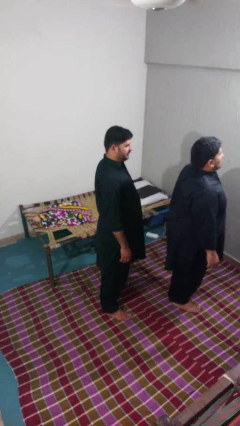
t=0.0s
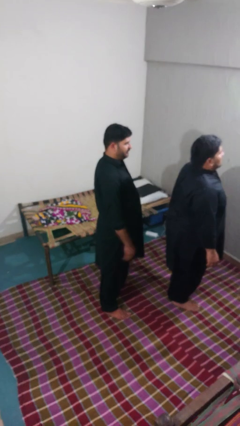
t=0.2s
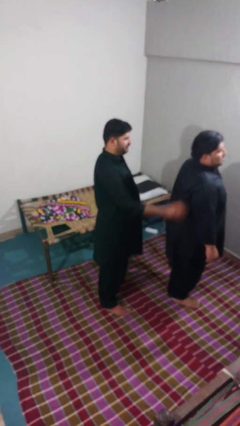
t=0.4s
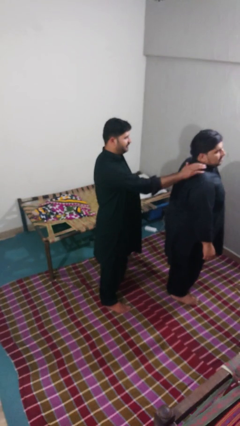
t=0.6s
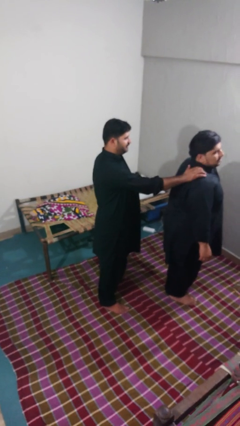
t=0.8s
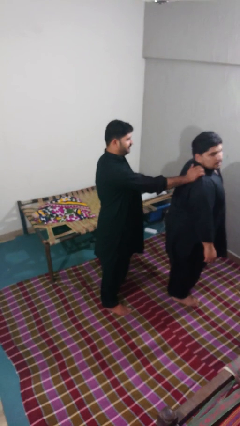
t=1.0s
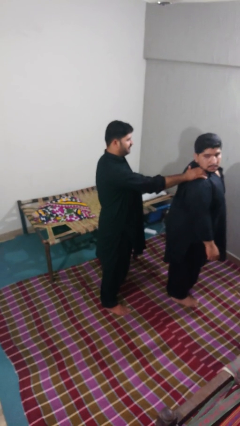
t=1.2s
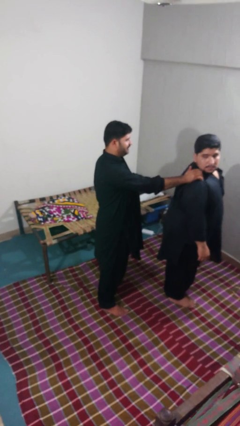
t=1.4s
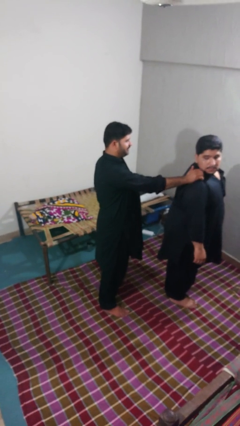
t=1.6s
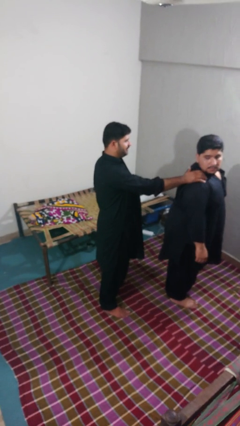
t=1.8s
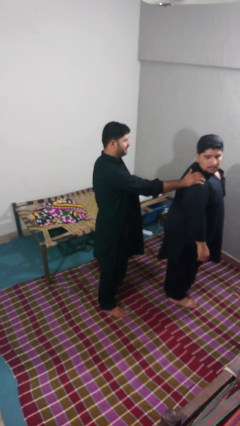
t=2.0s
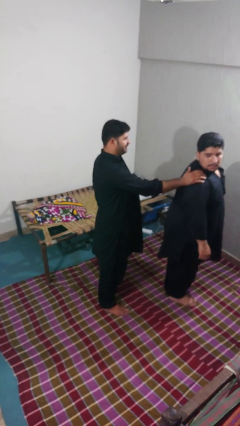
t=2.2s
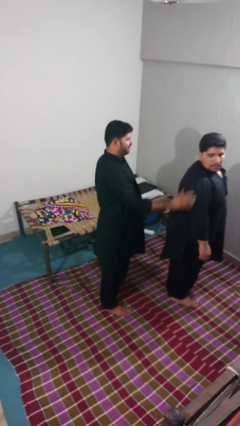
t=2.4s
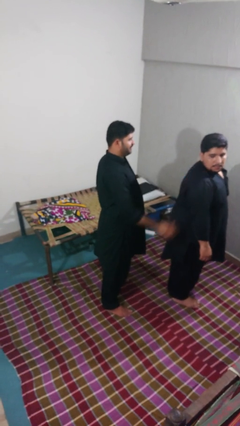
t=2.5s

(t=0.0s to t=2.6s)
person touches back of person

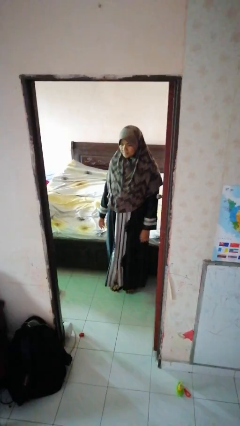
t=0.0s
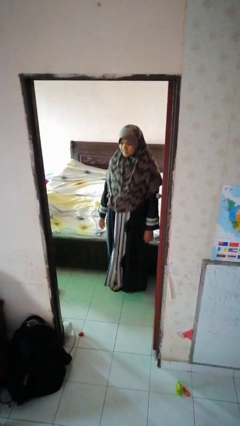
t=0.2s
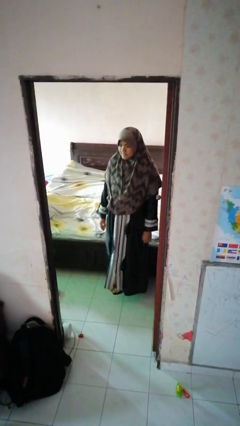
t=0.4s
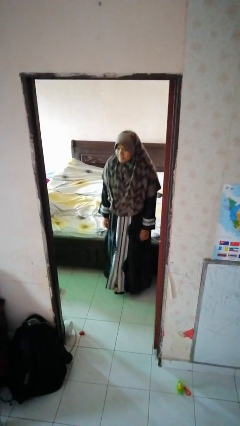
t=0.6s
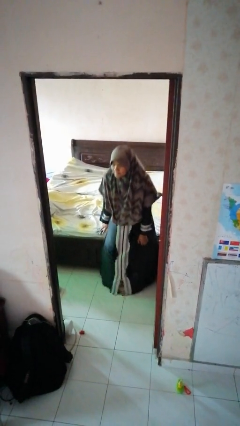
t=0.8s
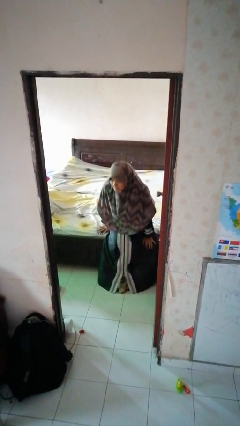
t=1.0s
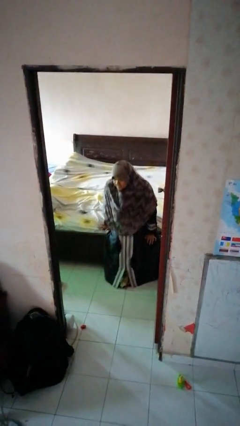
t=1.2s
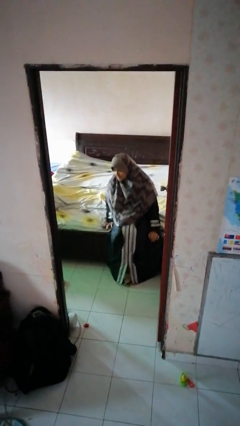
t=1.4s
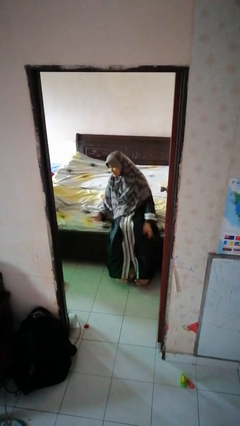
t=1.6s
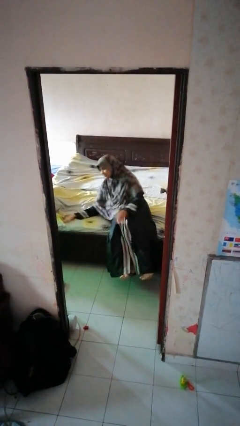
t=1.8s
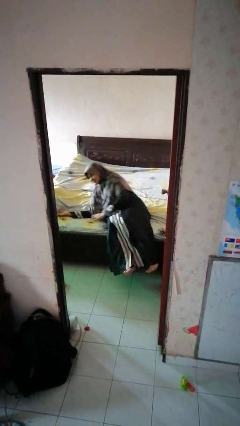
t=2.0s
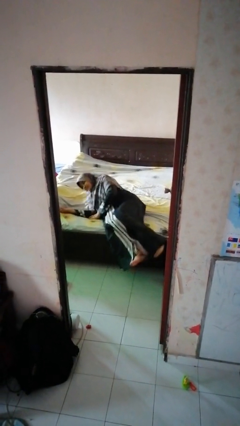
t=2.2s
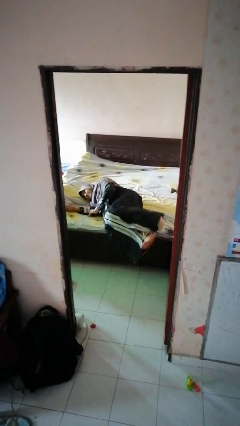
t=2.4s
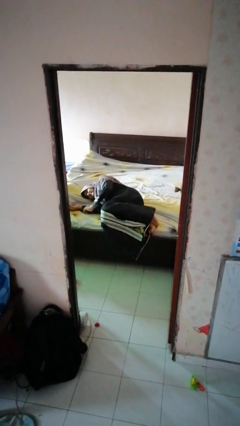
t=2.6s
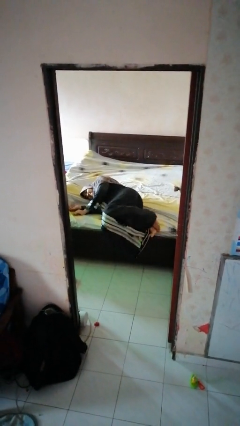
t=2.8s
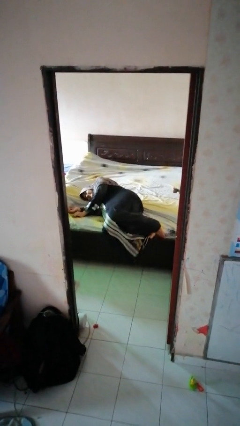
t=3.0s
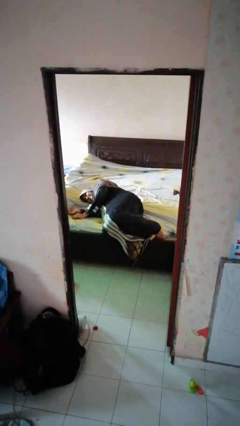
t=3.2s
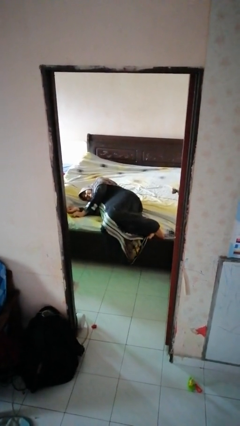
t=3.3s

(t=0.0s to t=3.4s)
person lies down on bed

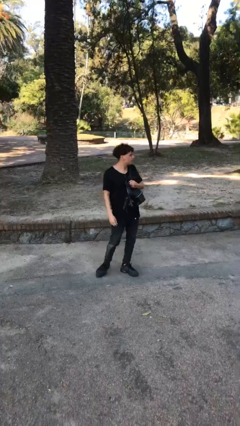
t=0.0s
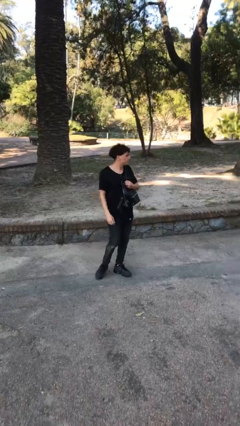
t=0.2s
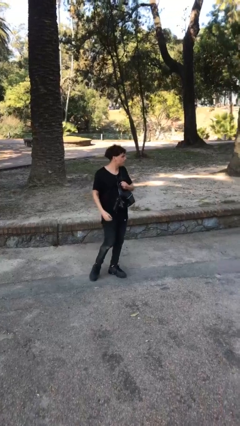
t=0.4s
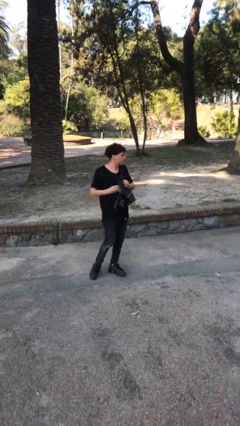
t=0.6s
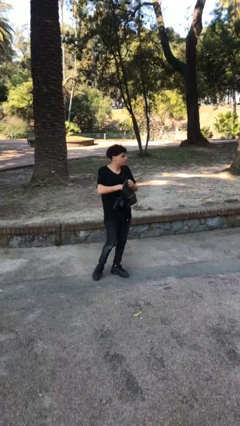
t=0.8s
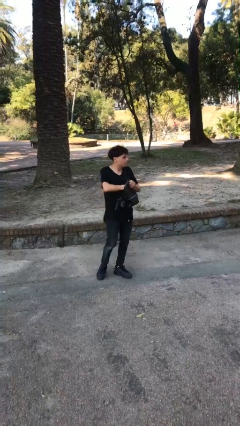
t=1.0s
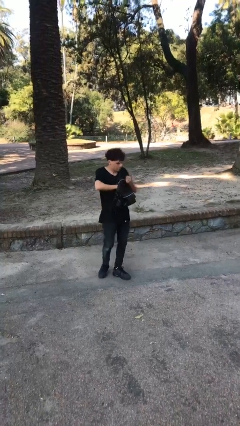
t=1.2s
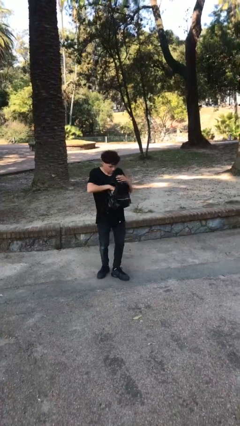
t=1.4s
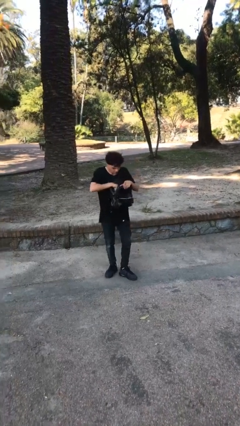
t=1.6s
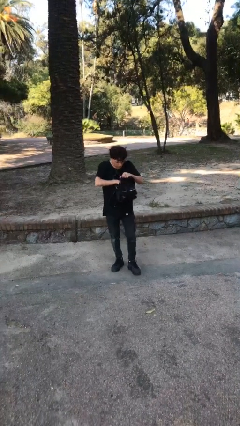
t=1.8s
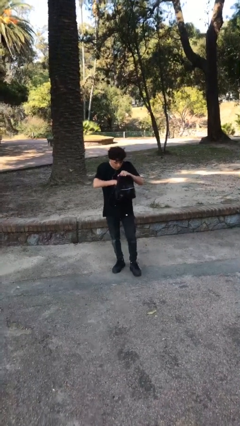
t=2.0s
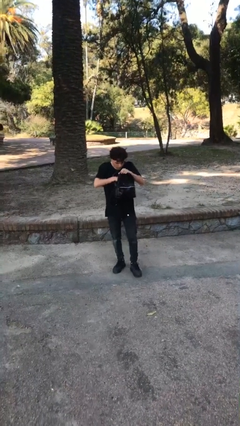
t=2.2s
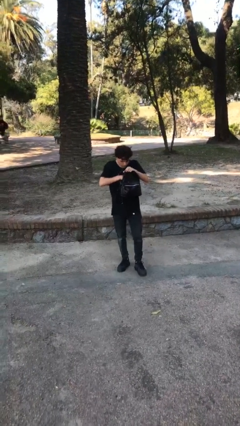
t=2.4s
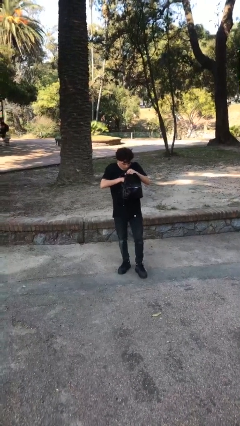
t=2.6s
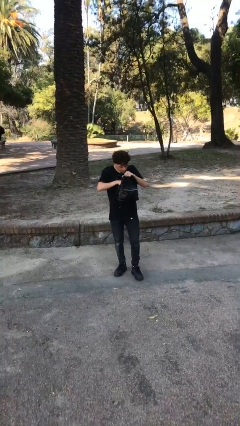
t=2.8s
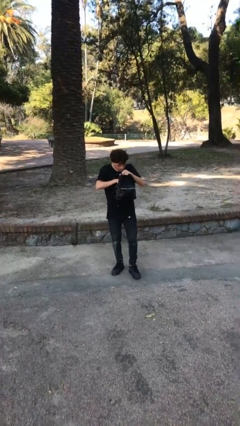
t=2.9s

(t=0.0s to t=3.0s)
person searches in purse

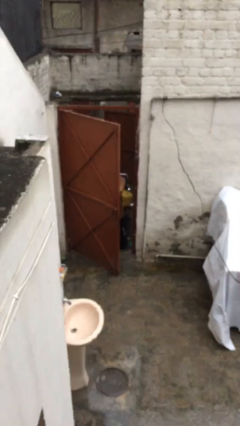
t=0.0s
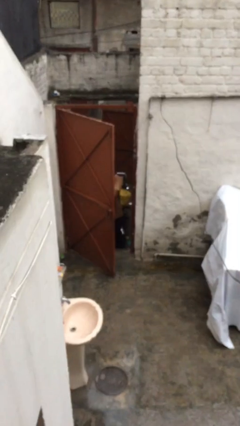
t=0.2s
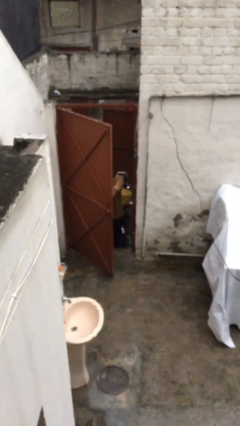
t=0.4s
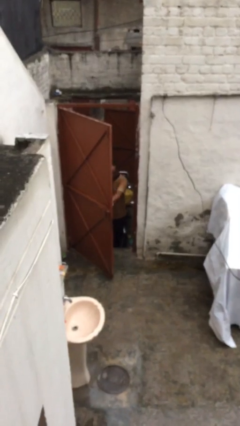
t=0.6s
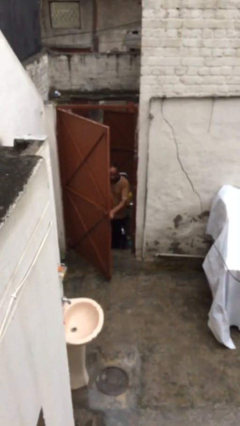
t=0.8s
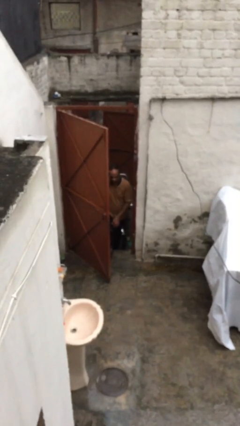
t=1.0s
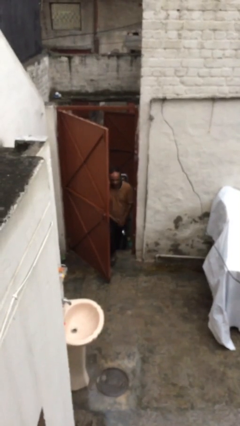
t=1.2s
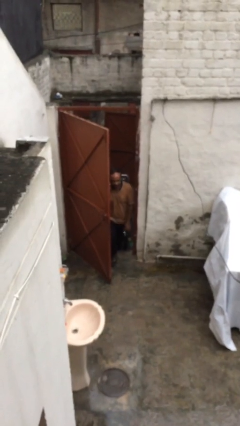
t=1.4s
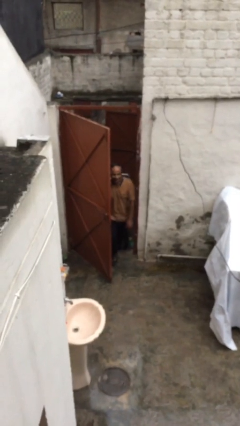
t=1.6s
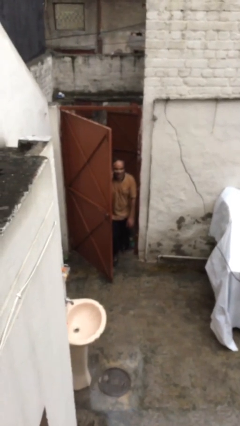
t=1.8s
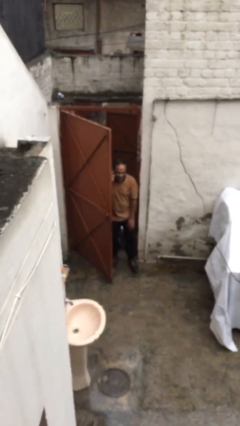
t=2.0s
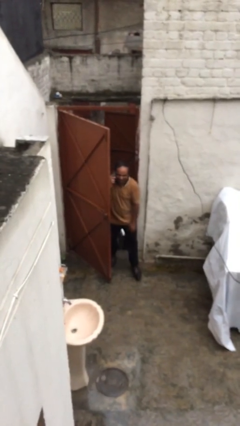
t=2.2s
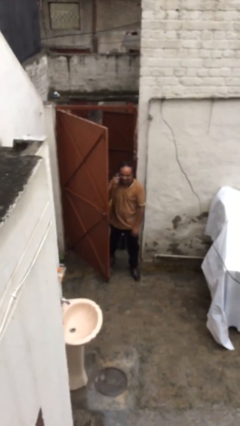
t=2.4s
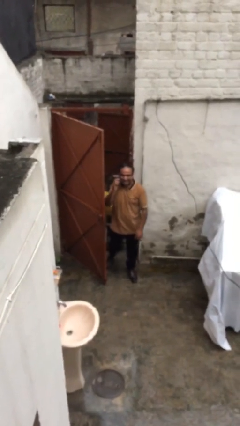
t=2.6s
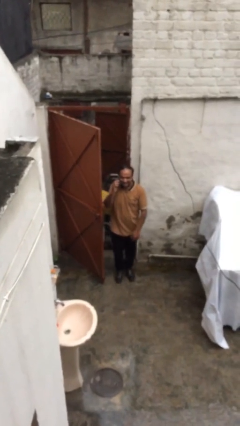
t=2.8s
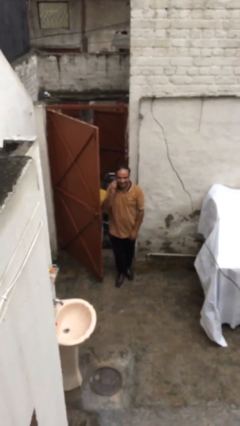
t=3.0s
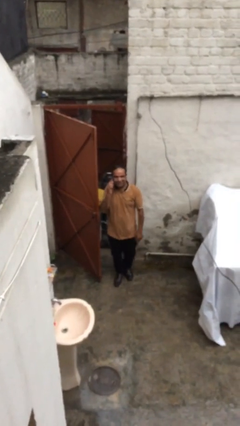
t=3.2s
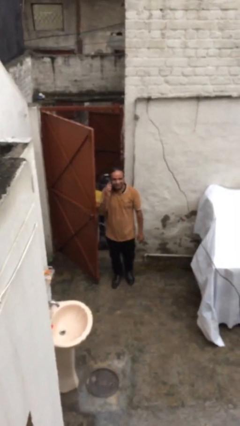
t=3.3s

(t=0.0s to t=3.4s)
person enters scene through structure

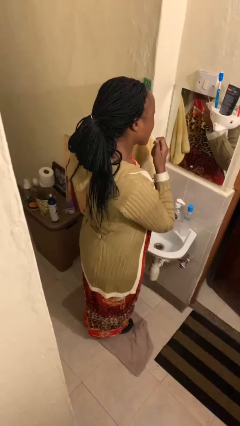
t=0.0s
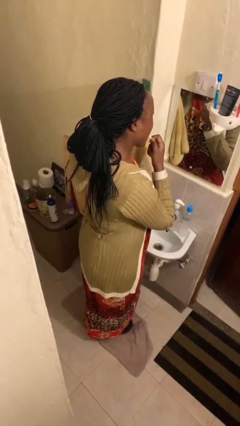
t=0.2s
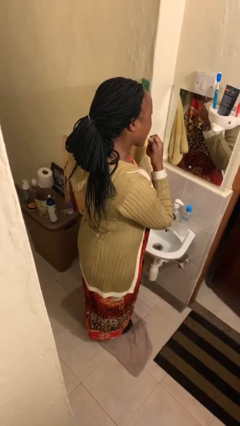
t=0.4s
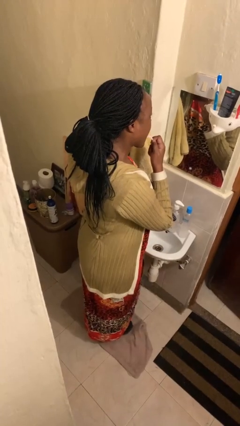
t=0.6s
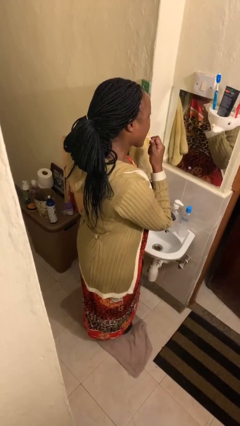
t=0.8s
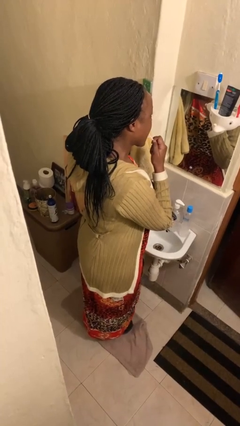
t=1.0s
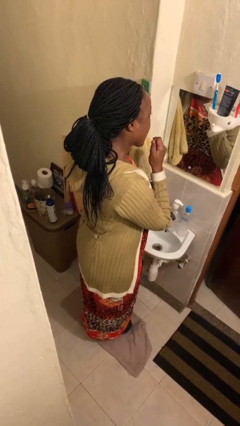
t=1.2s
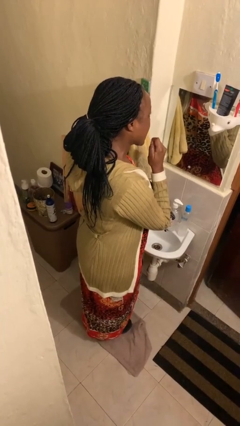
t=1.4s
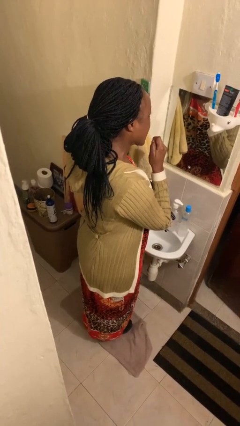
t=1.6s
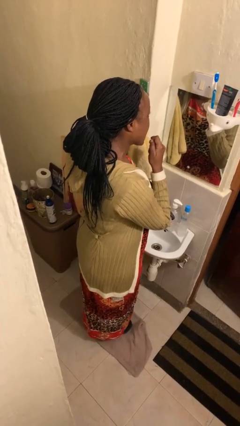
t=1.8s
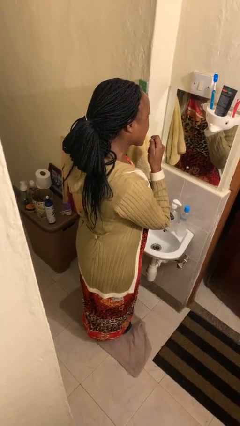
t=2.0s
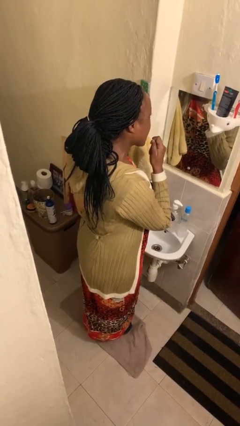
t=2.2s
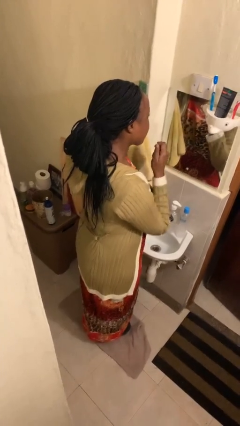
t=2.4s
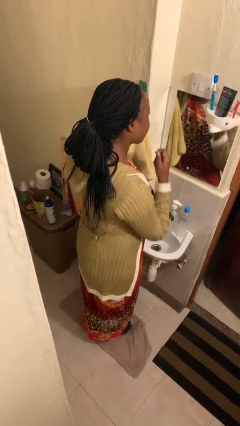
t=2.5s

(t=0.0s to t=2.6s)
person flosses

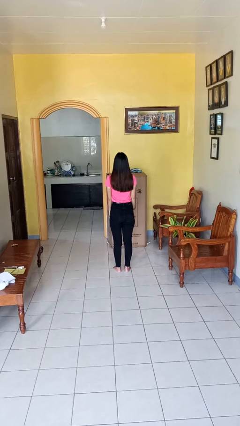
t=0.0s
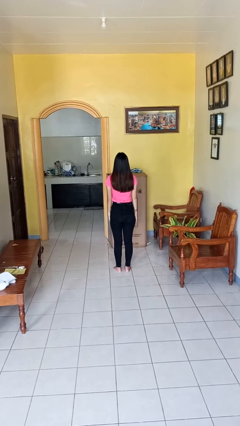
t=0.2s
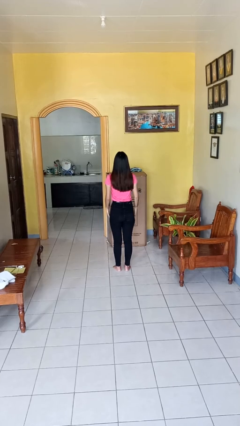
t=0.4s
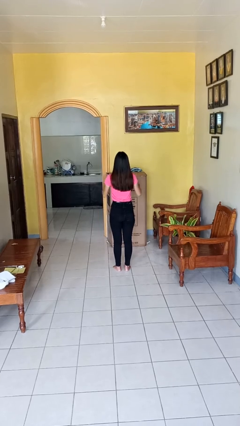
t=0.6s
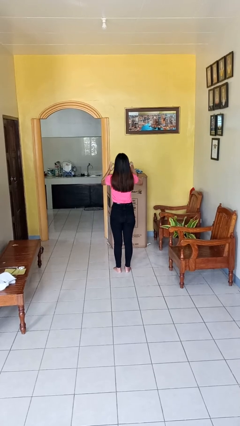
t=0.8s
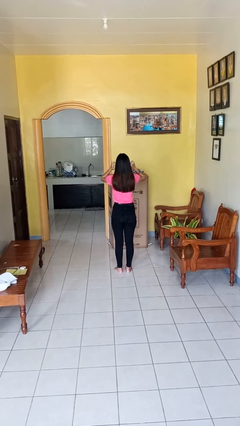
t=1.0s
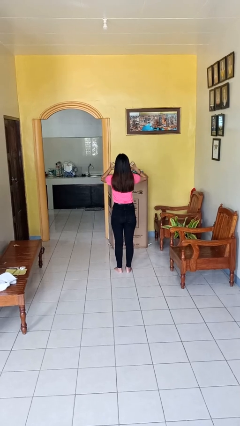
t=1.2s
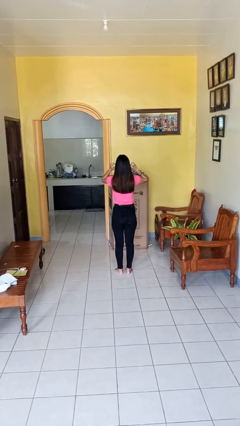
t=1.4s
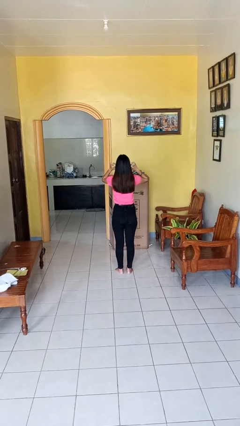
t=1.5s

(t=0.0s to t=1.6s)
person puts fingers in ear

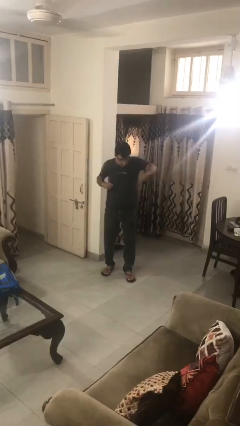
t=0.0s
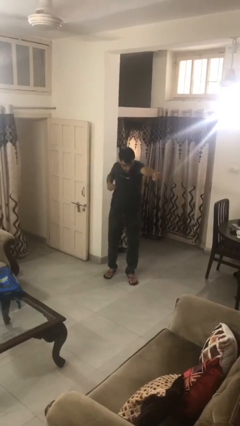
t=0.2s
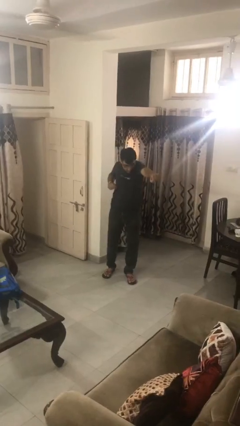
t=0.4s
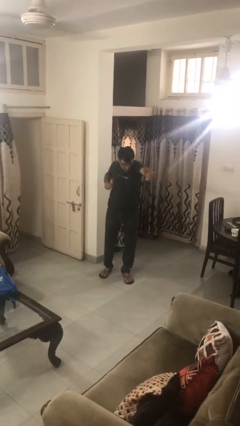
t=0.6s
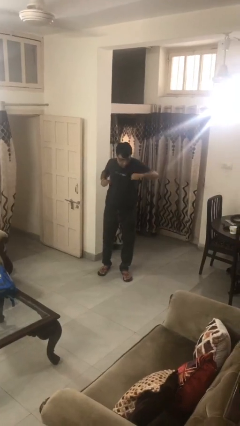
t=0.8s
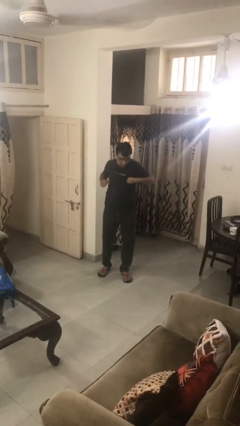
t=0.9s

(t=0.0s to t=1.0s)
person punches
